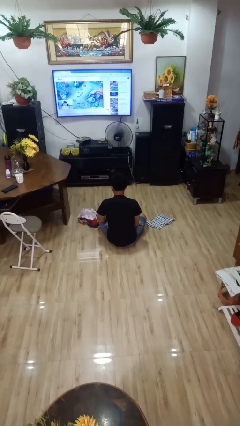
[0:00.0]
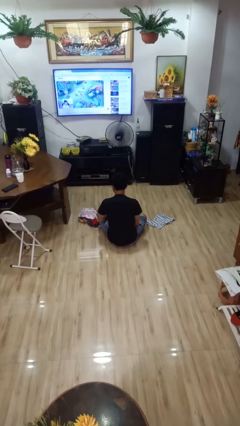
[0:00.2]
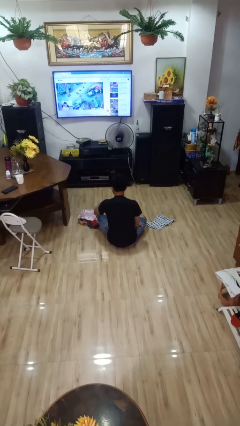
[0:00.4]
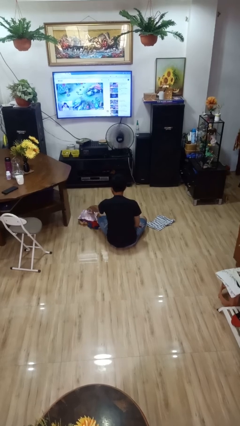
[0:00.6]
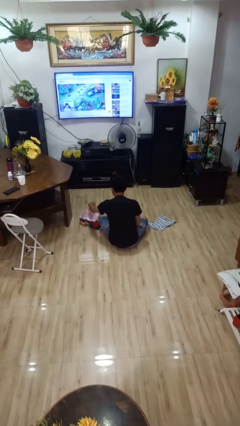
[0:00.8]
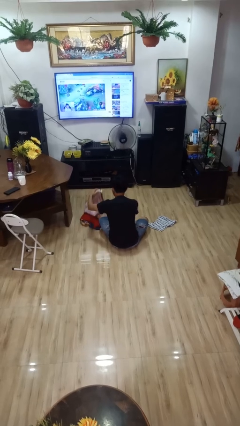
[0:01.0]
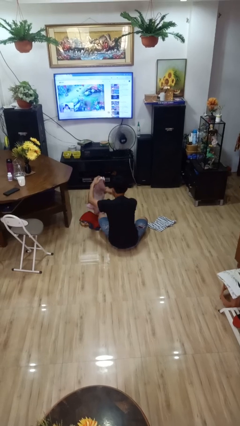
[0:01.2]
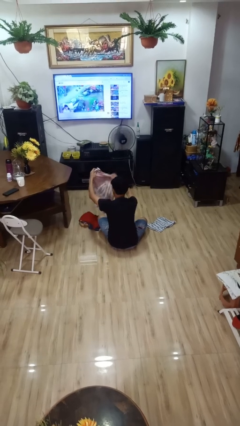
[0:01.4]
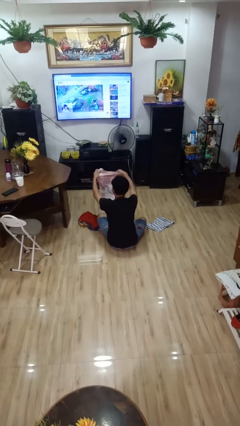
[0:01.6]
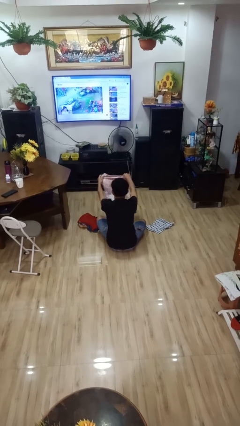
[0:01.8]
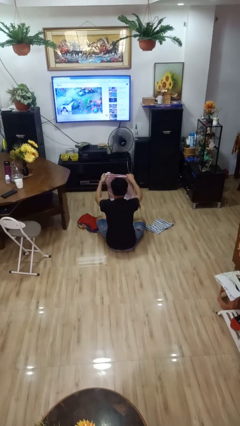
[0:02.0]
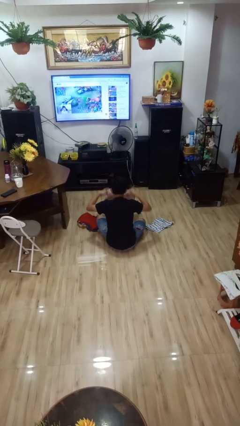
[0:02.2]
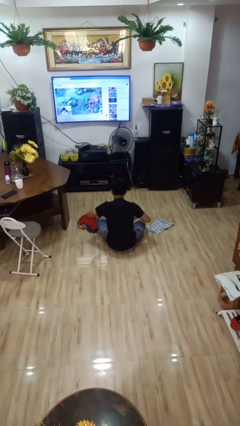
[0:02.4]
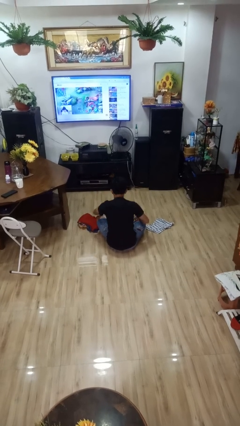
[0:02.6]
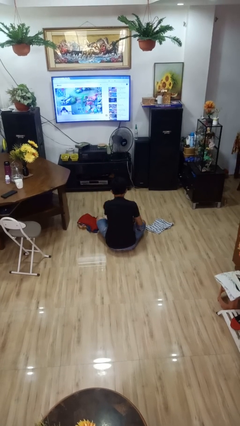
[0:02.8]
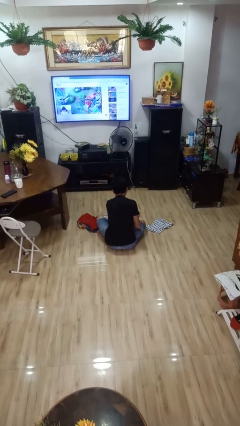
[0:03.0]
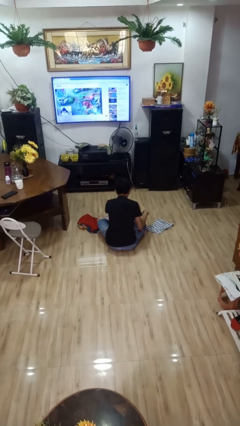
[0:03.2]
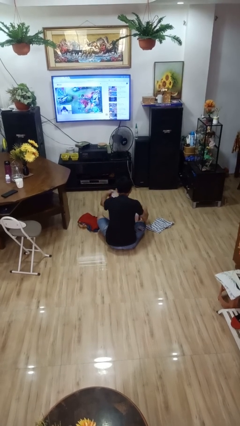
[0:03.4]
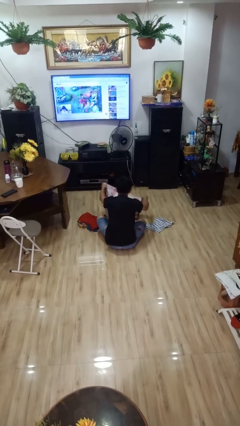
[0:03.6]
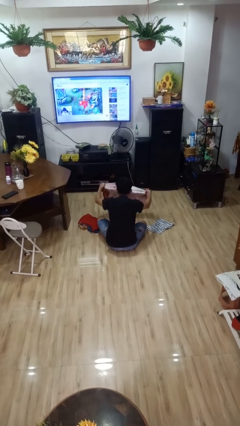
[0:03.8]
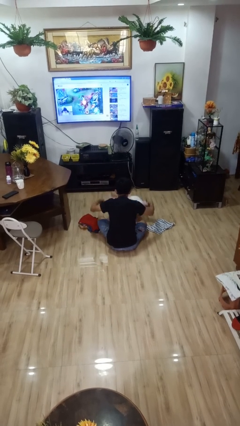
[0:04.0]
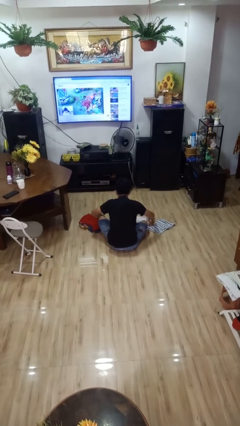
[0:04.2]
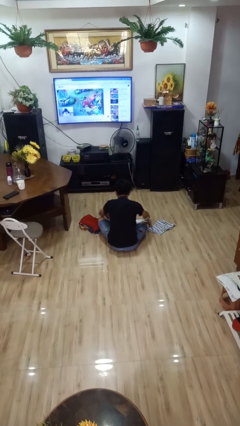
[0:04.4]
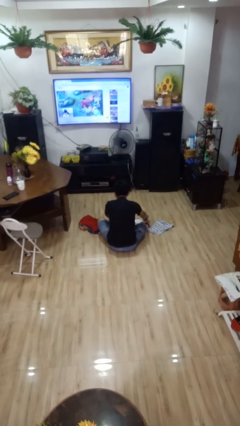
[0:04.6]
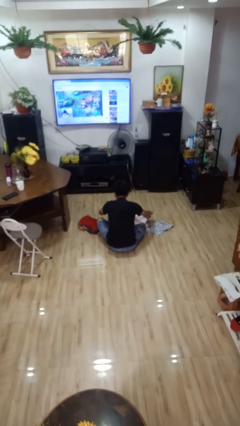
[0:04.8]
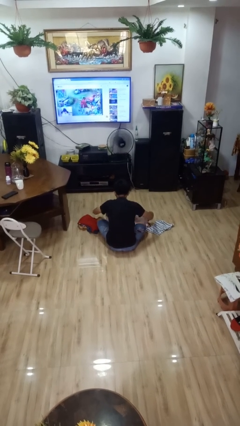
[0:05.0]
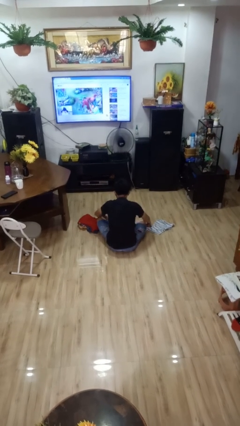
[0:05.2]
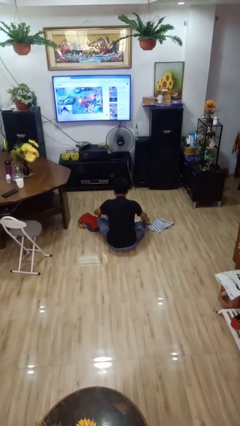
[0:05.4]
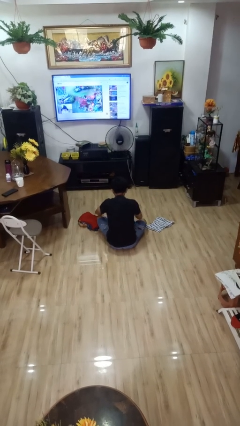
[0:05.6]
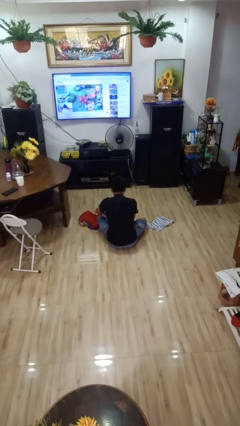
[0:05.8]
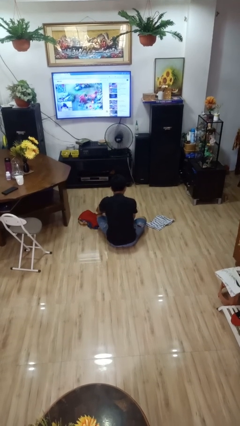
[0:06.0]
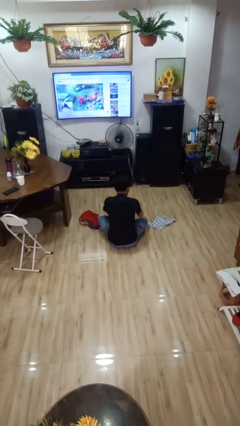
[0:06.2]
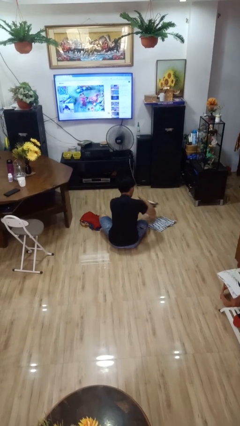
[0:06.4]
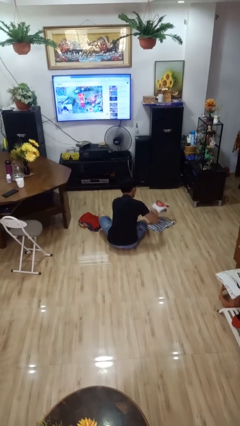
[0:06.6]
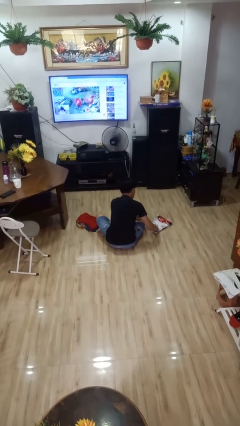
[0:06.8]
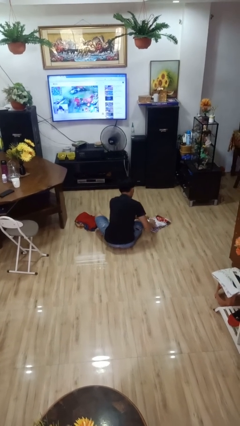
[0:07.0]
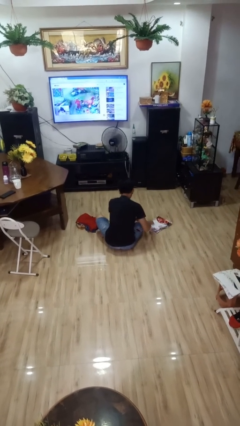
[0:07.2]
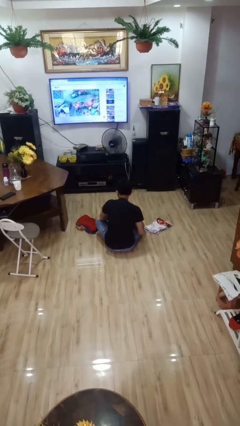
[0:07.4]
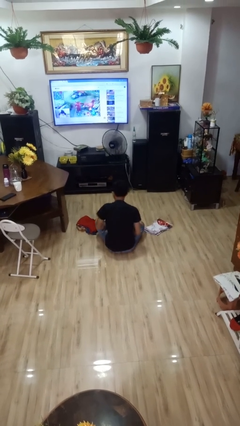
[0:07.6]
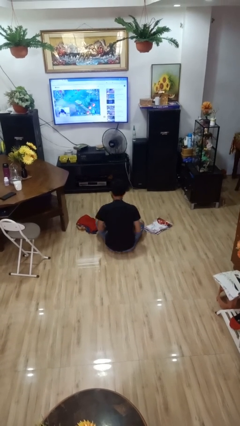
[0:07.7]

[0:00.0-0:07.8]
person folds shirt

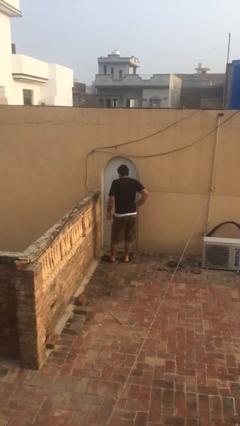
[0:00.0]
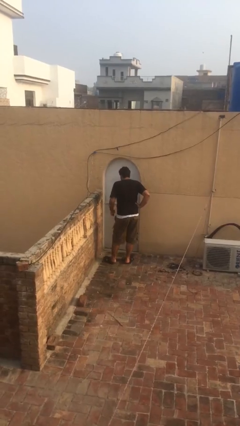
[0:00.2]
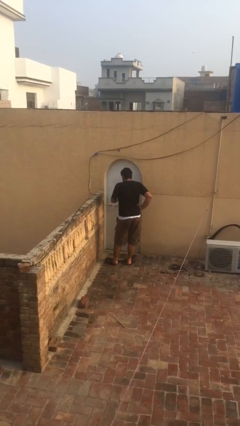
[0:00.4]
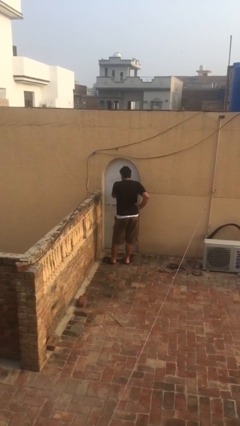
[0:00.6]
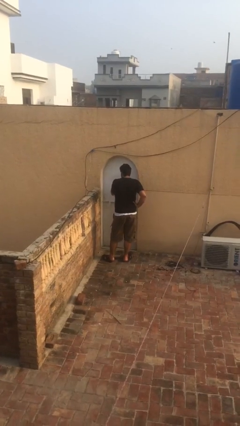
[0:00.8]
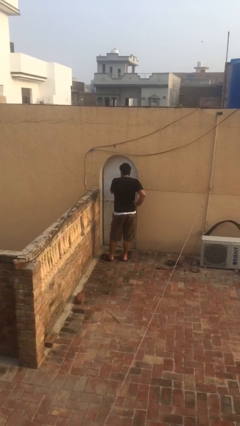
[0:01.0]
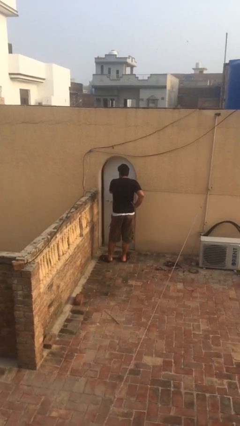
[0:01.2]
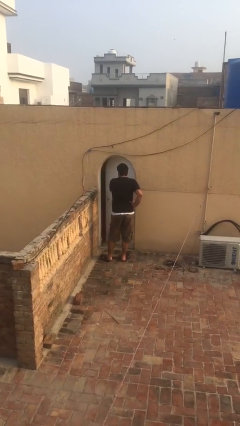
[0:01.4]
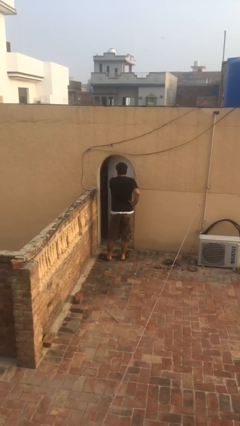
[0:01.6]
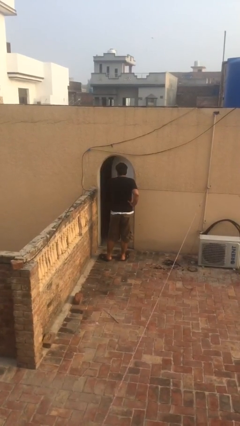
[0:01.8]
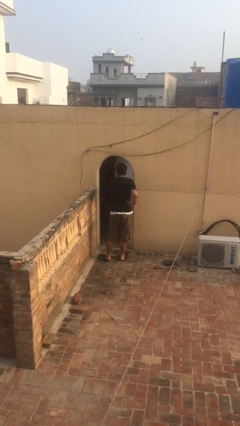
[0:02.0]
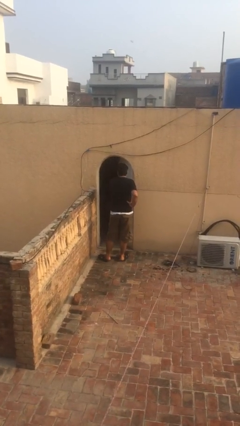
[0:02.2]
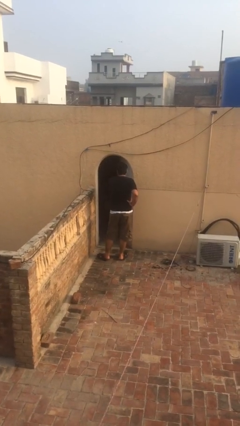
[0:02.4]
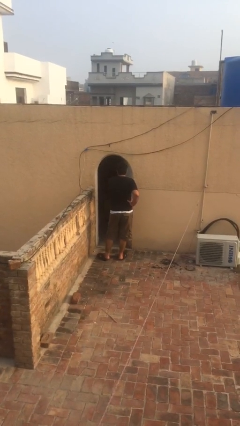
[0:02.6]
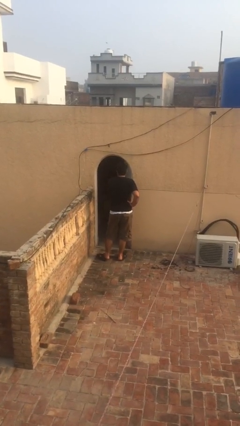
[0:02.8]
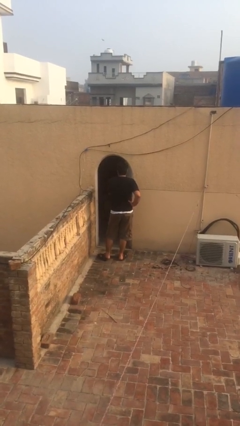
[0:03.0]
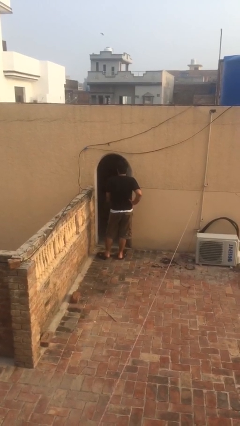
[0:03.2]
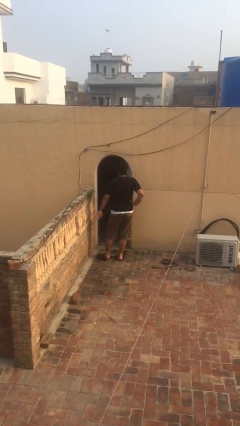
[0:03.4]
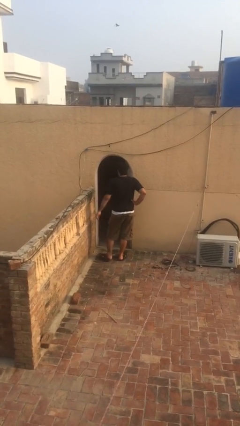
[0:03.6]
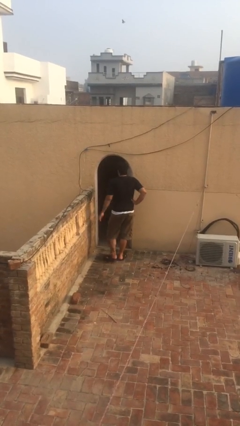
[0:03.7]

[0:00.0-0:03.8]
person opens facility door

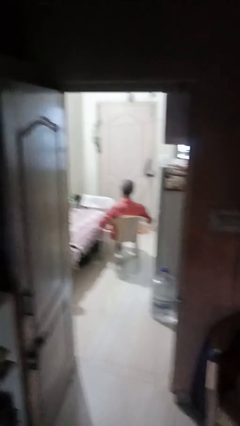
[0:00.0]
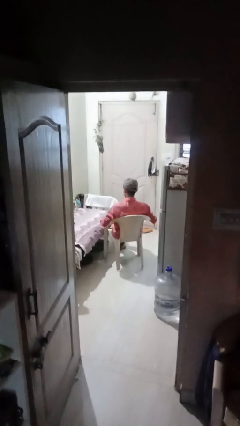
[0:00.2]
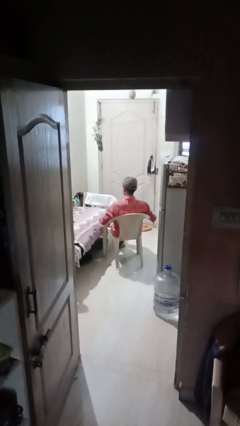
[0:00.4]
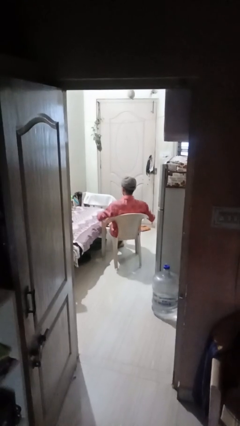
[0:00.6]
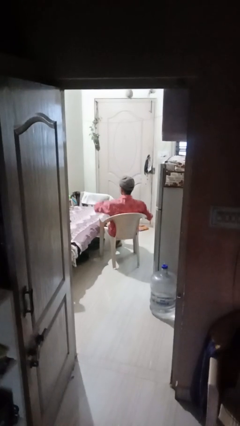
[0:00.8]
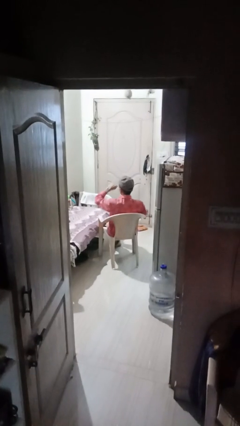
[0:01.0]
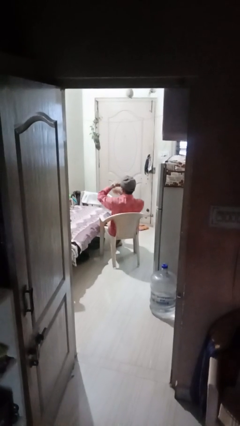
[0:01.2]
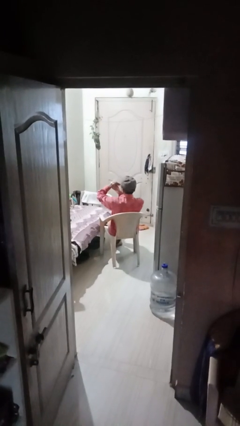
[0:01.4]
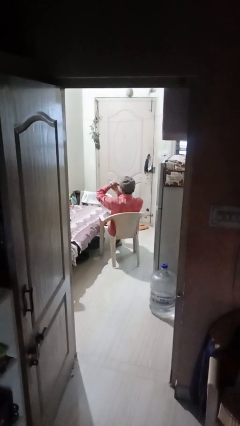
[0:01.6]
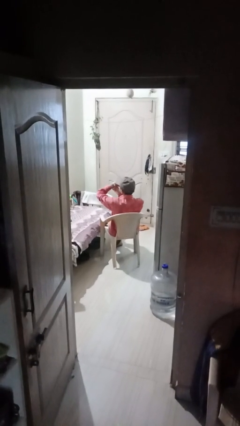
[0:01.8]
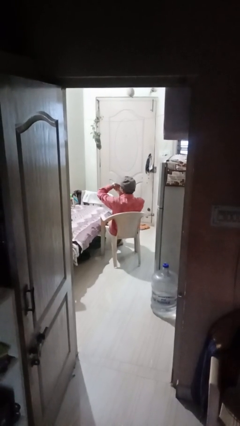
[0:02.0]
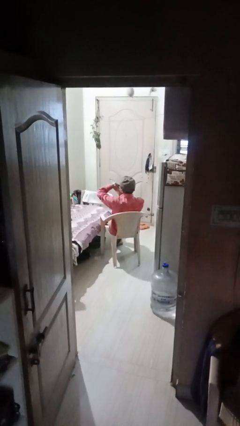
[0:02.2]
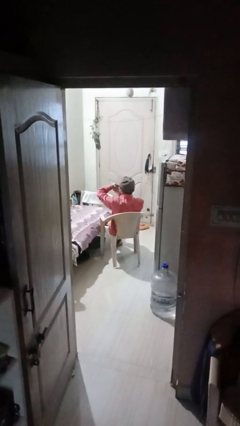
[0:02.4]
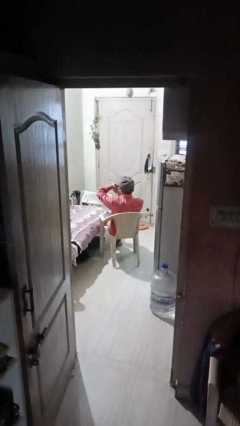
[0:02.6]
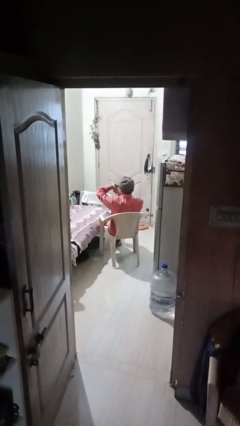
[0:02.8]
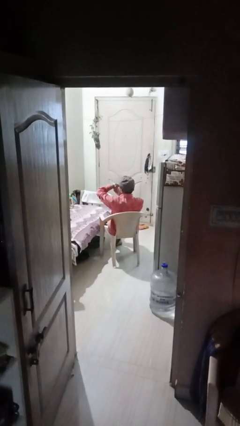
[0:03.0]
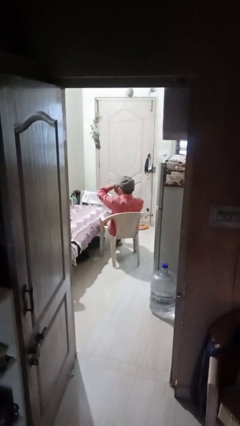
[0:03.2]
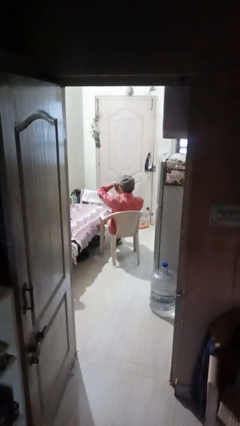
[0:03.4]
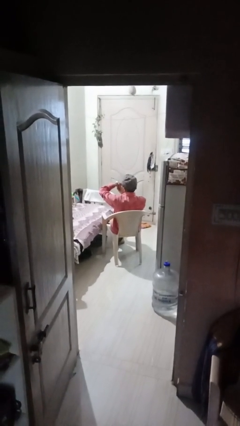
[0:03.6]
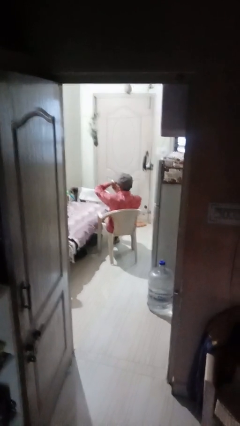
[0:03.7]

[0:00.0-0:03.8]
person looks at wristwatch

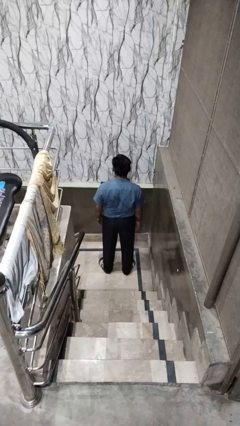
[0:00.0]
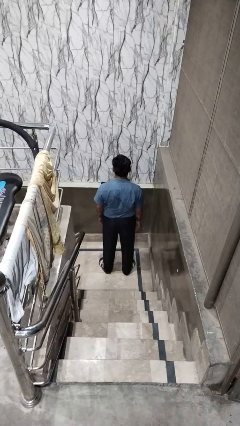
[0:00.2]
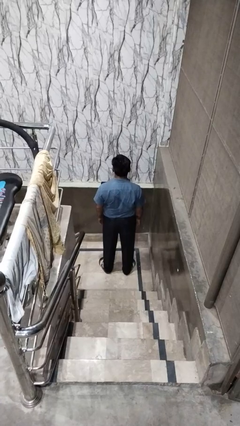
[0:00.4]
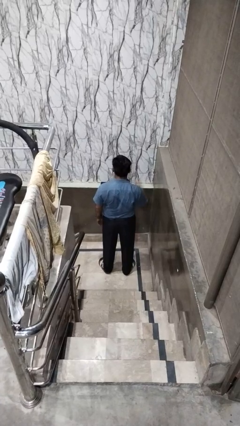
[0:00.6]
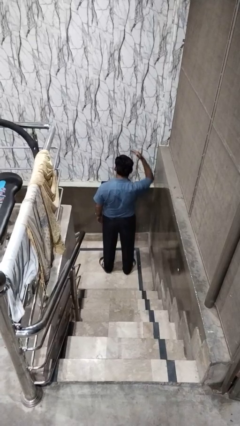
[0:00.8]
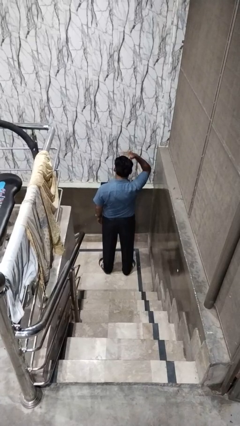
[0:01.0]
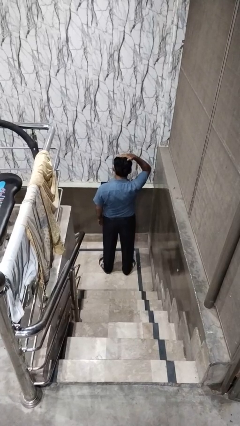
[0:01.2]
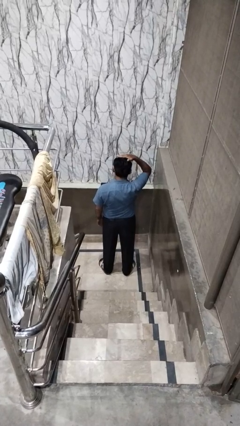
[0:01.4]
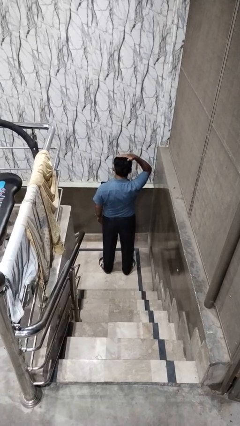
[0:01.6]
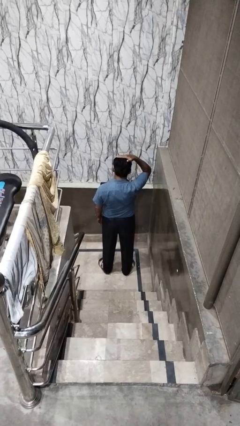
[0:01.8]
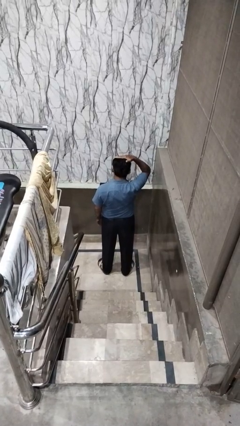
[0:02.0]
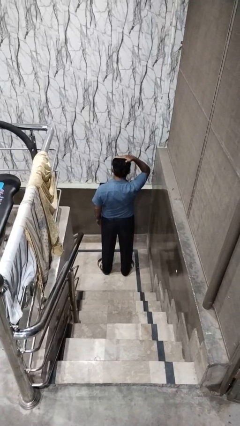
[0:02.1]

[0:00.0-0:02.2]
person pats head
